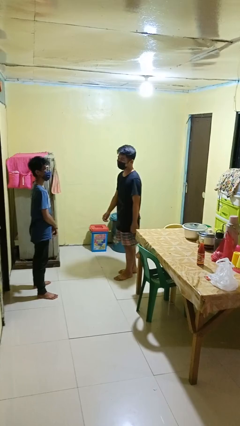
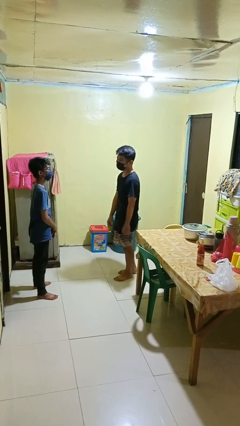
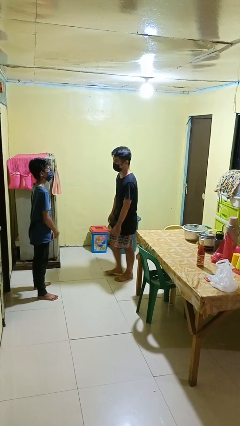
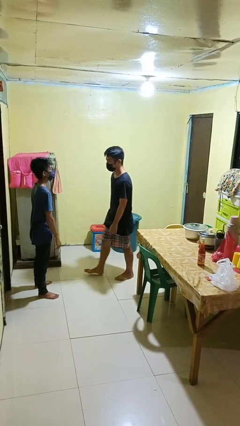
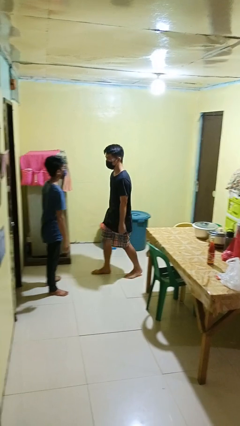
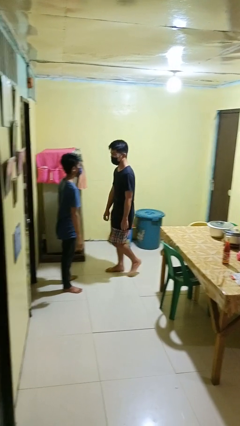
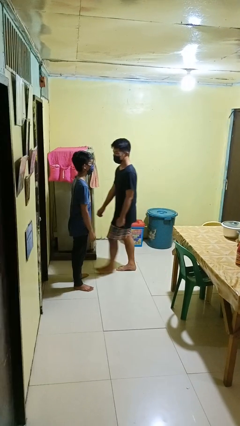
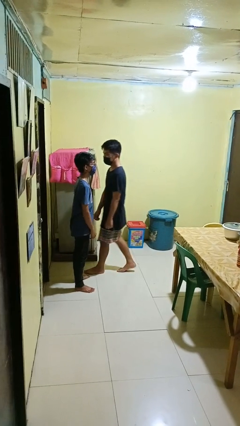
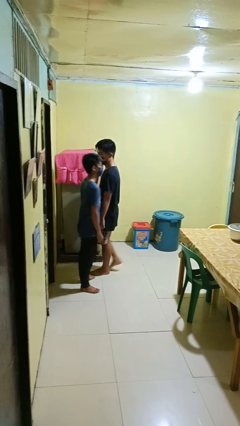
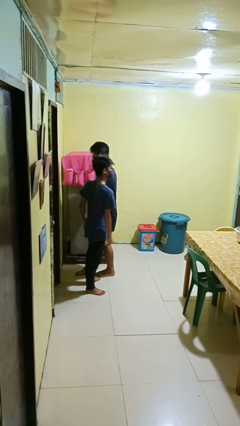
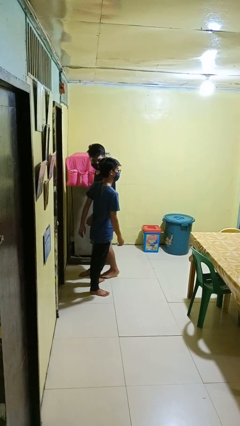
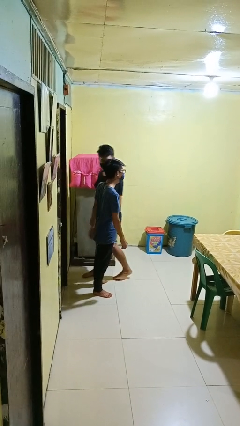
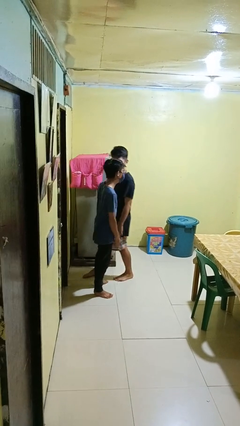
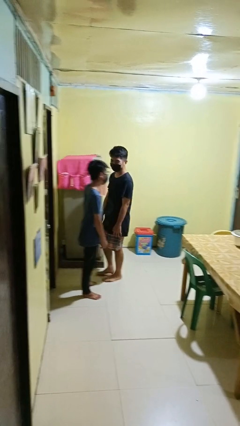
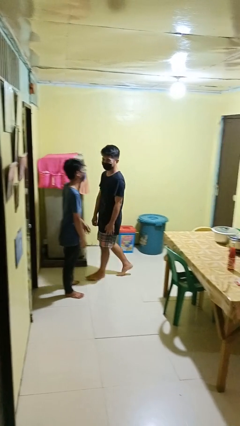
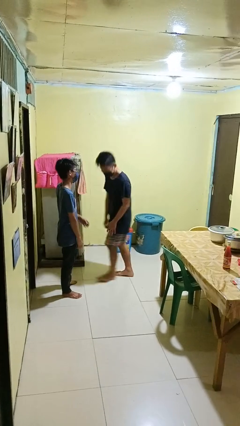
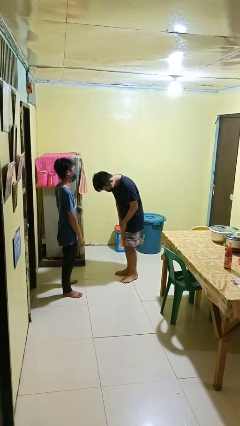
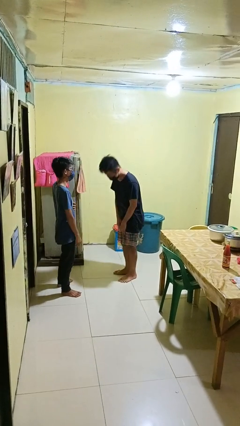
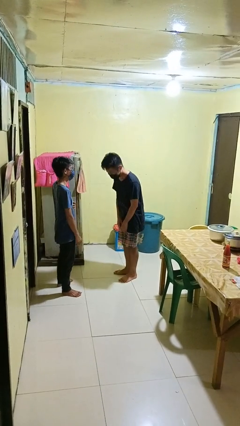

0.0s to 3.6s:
person bumps into person

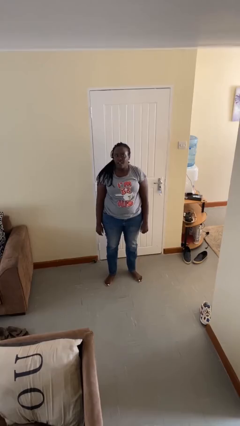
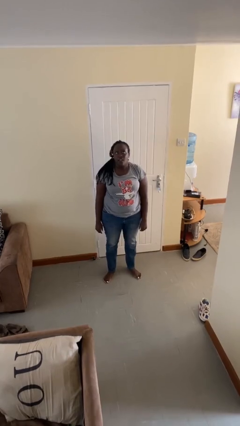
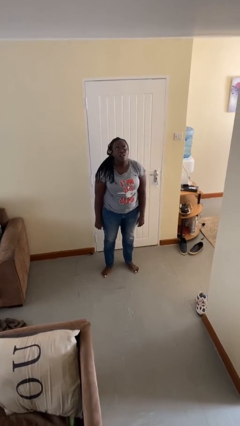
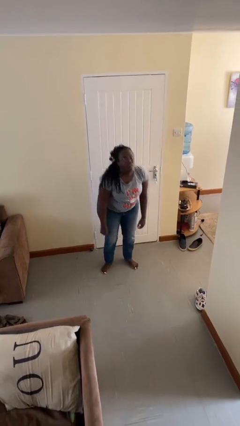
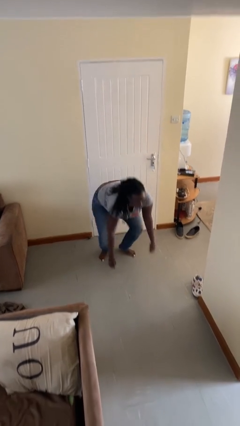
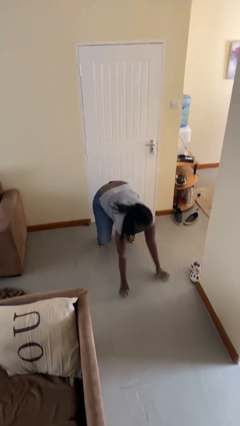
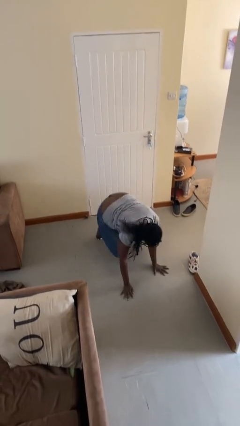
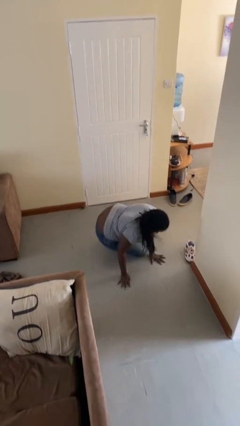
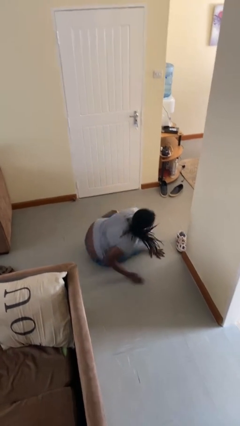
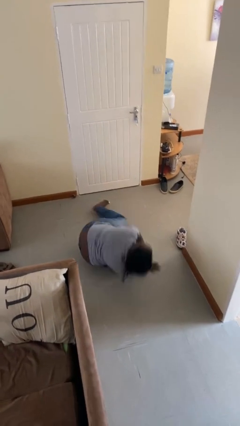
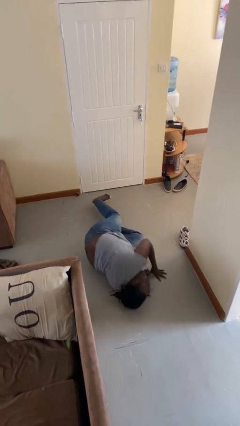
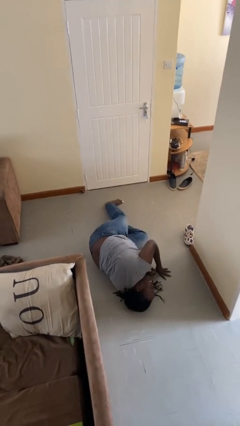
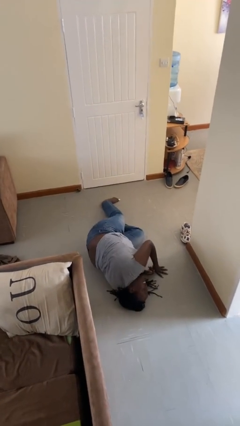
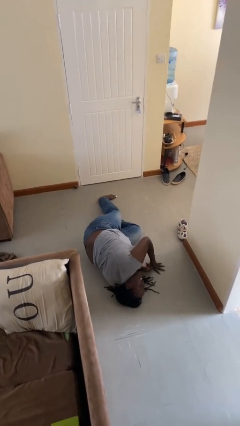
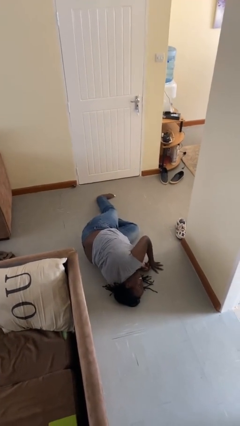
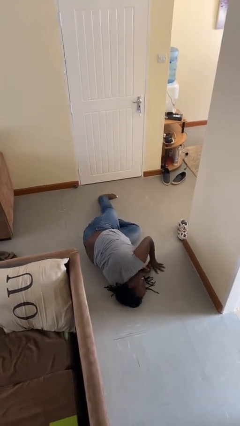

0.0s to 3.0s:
person falls while standing

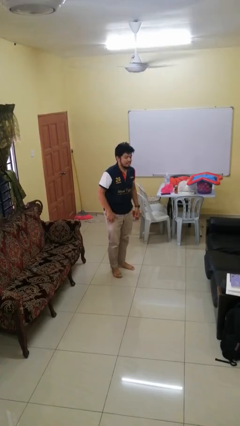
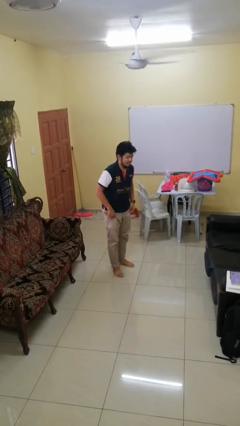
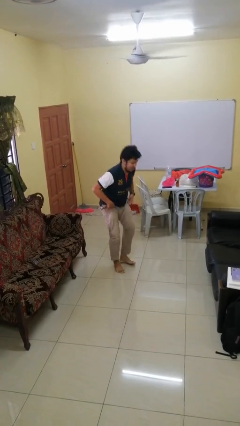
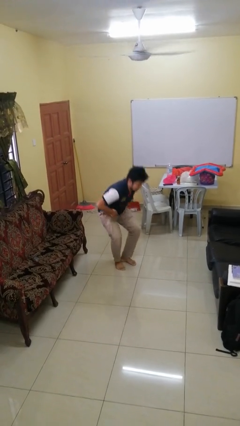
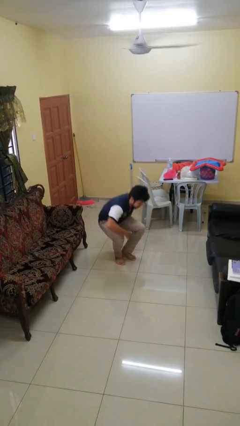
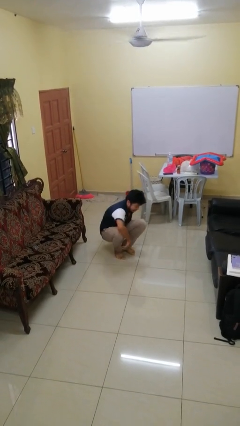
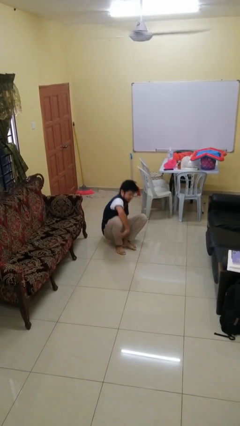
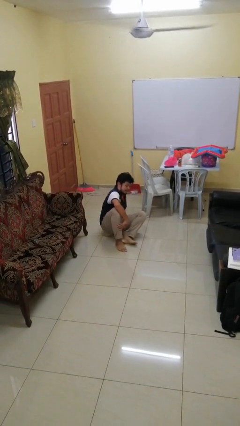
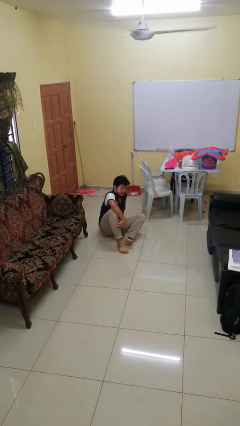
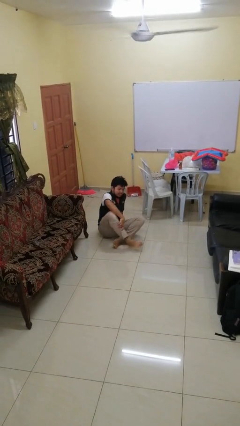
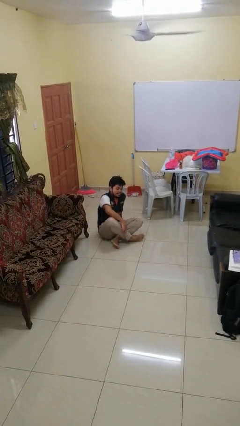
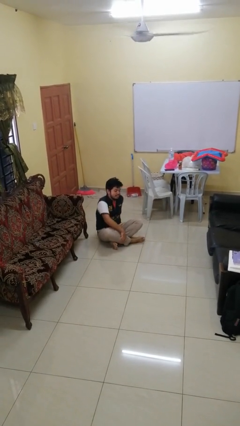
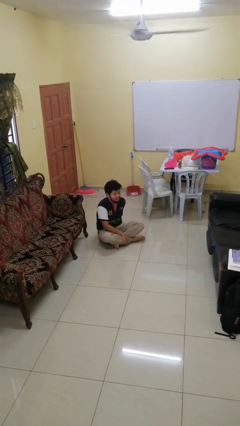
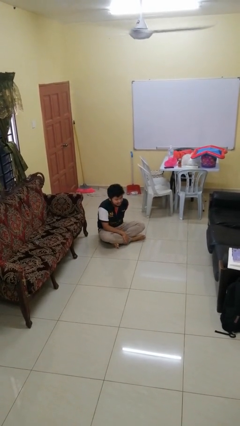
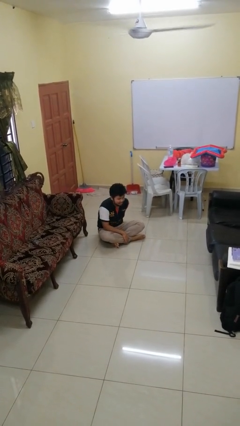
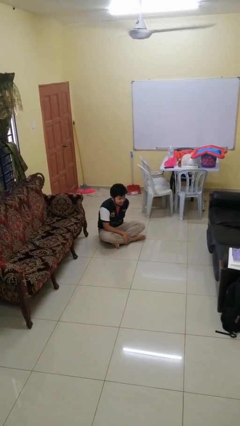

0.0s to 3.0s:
person sits crisscross

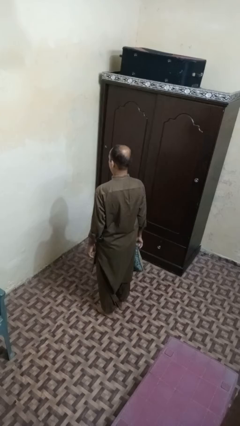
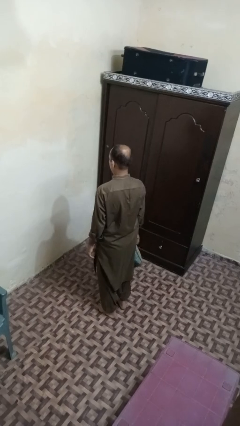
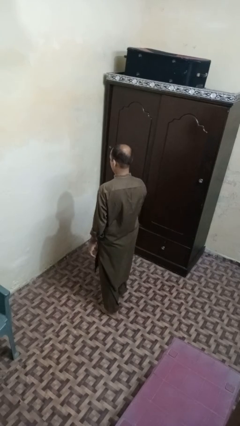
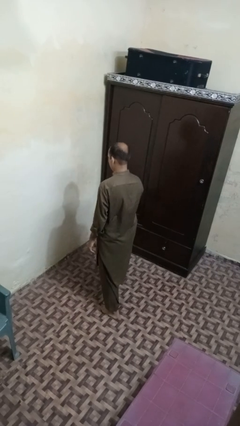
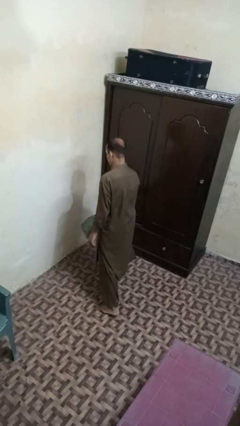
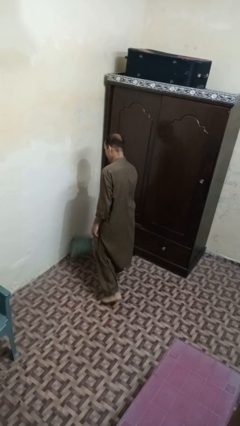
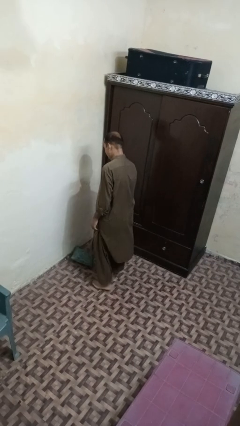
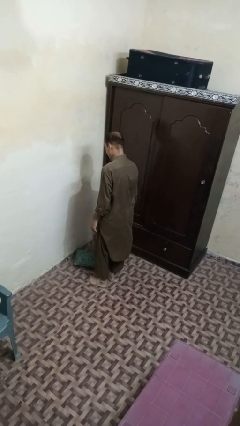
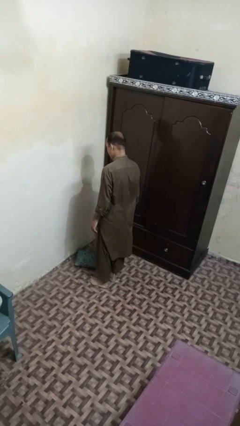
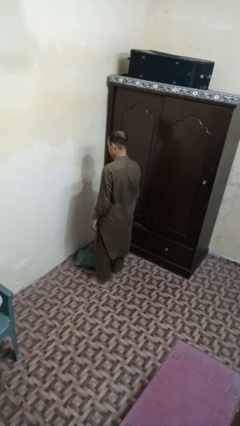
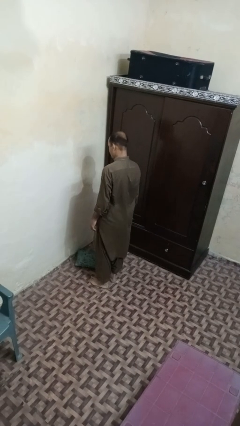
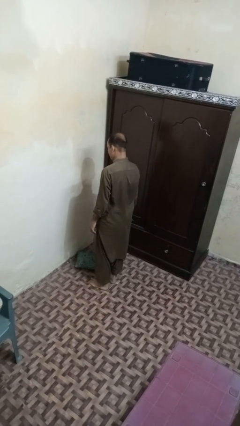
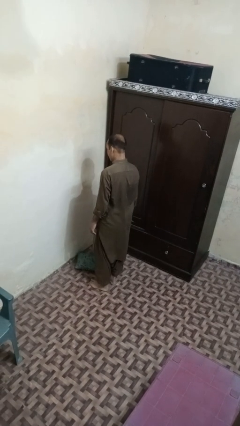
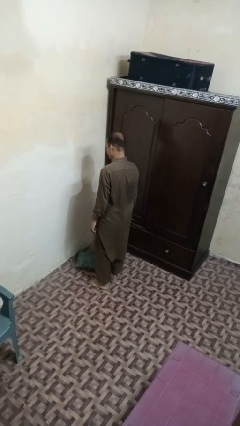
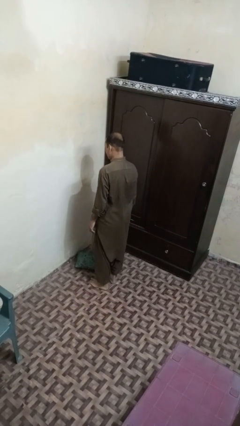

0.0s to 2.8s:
person throws object to ground

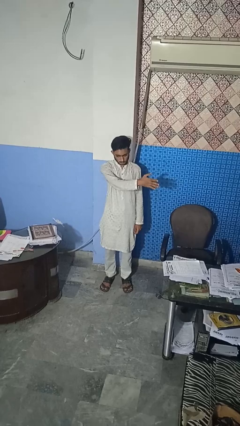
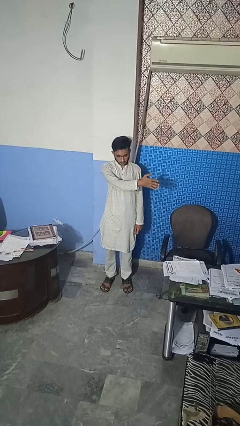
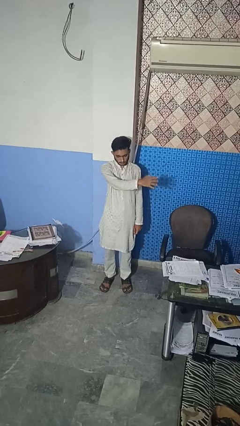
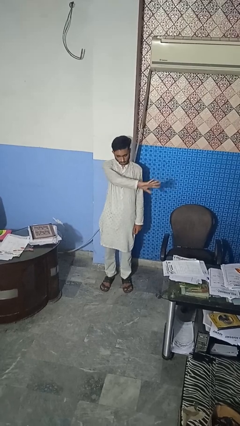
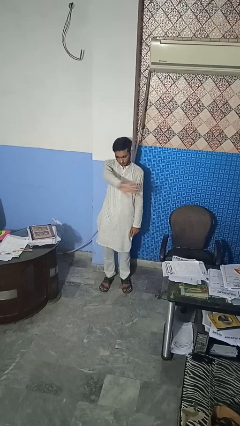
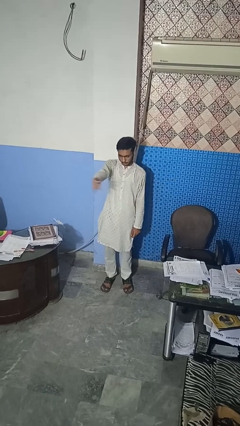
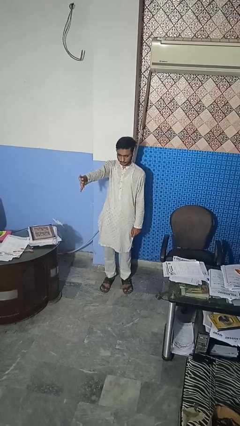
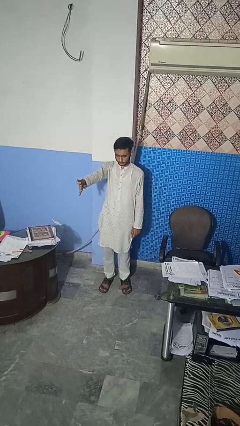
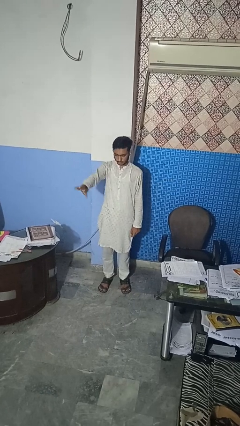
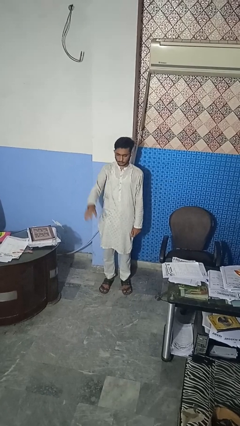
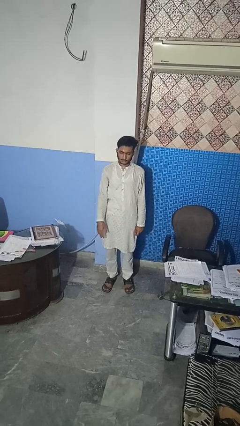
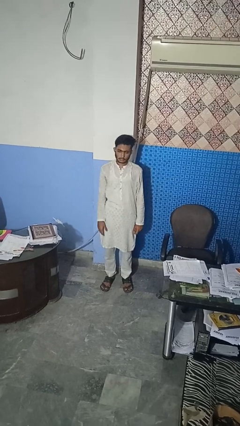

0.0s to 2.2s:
person gestures swipe right

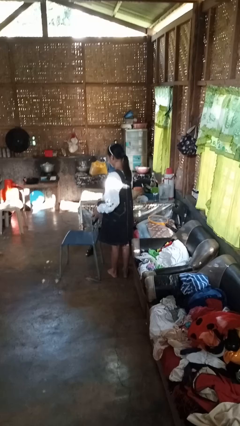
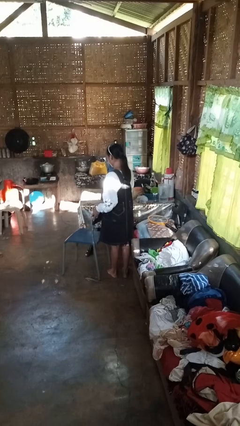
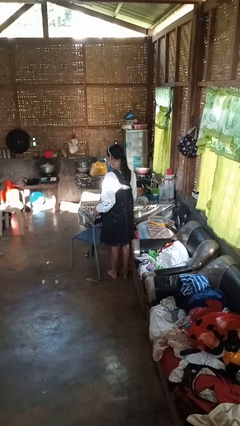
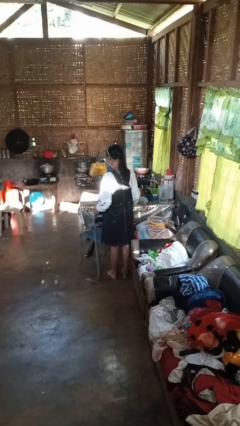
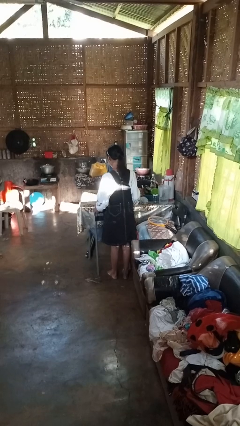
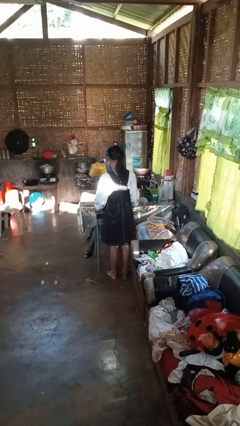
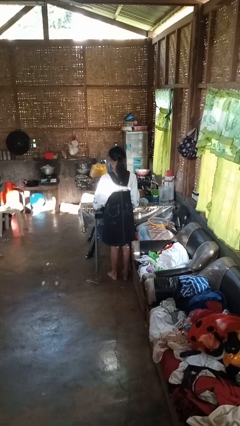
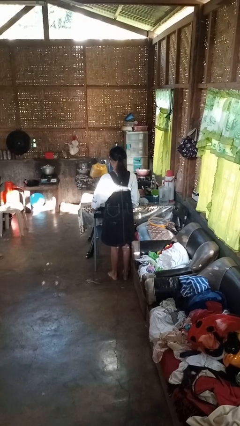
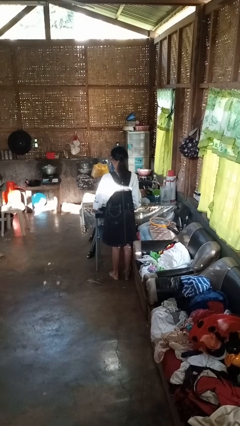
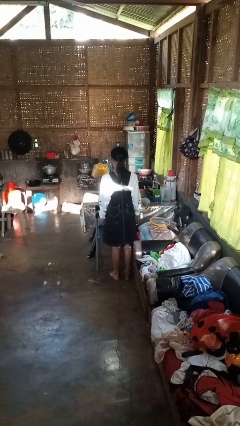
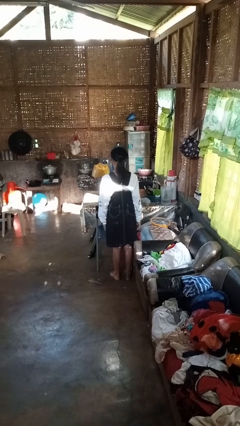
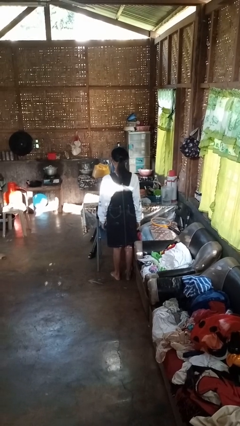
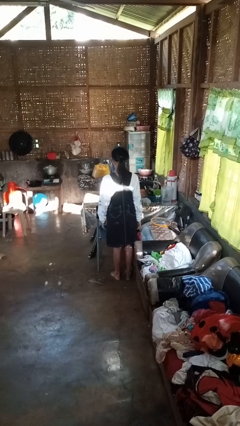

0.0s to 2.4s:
person pushes in chair
